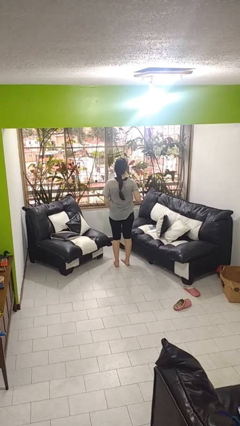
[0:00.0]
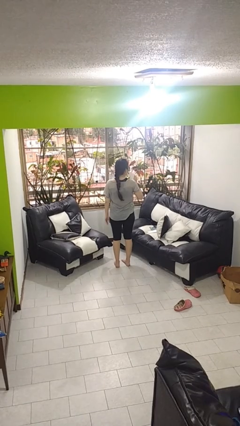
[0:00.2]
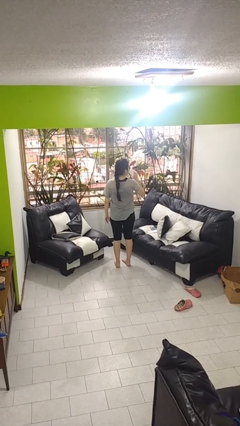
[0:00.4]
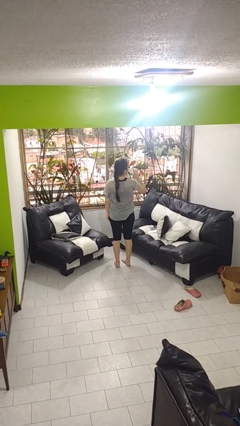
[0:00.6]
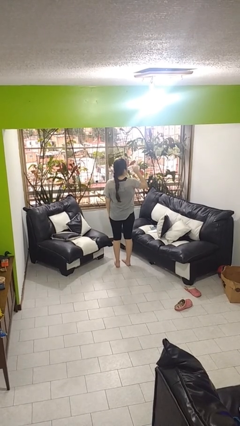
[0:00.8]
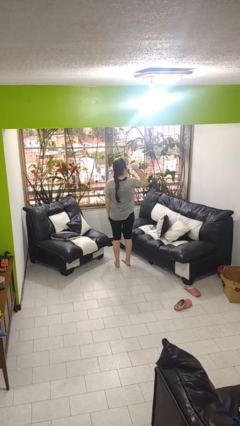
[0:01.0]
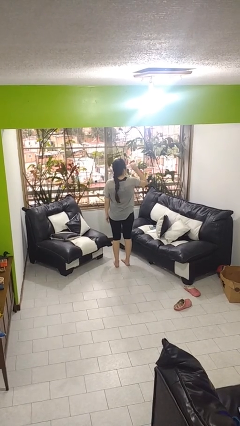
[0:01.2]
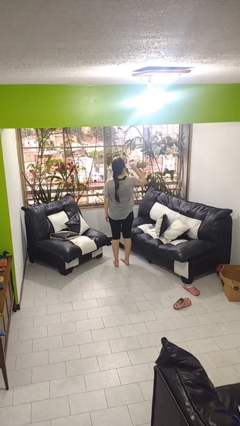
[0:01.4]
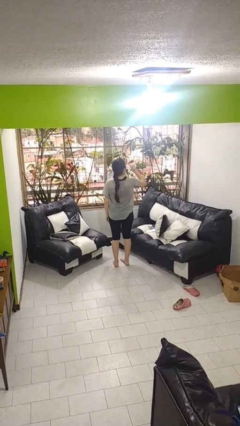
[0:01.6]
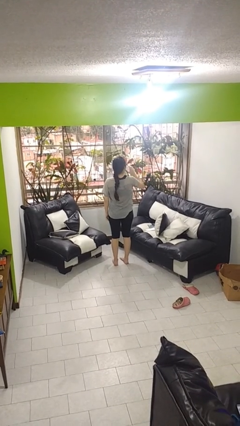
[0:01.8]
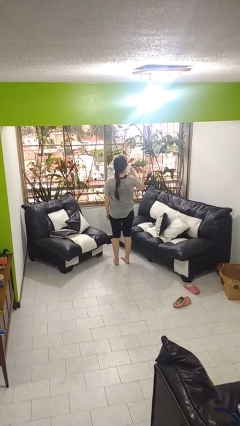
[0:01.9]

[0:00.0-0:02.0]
person drinks from bottle

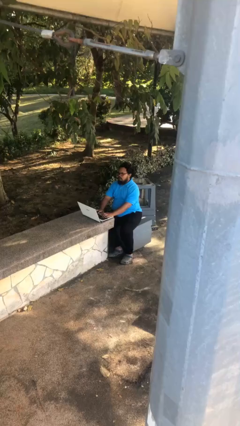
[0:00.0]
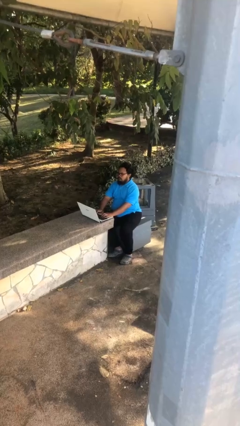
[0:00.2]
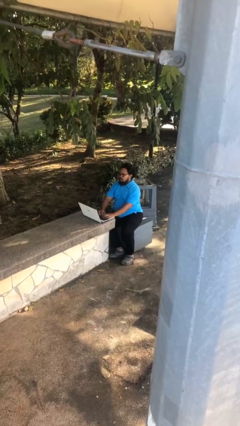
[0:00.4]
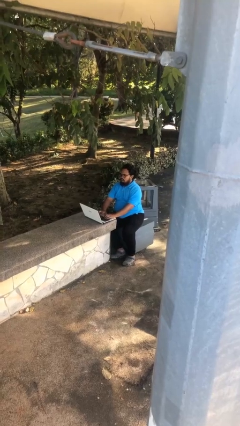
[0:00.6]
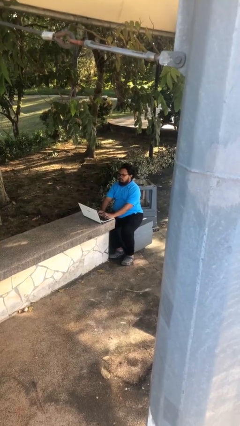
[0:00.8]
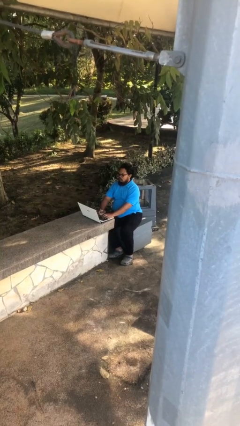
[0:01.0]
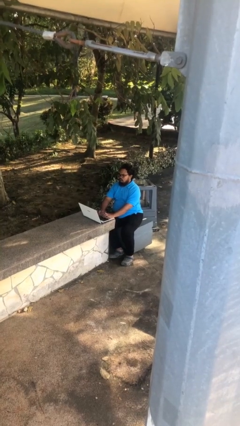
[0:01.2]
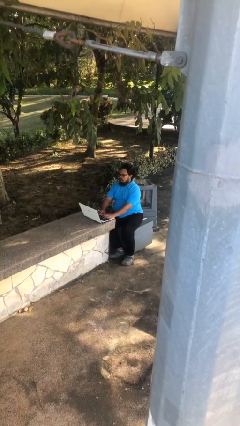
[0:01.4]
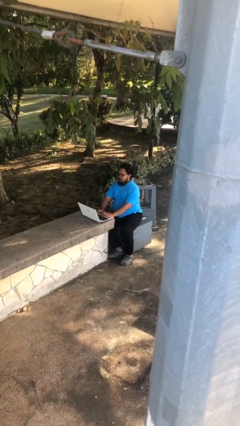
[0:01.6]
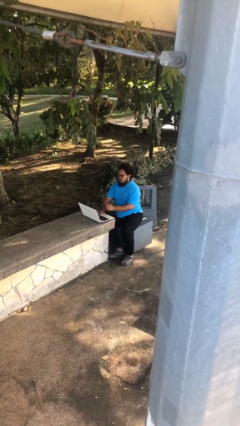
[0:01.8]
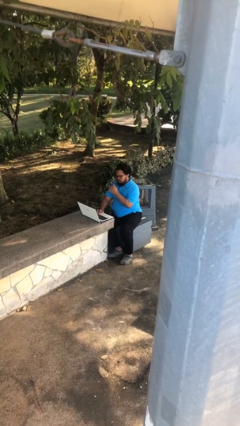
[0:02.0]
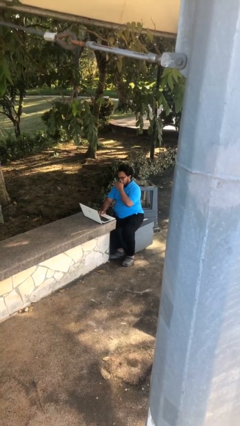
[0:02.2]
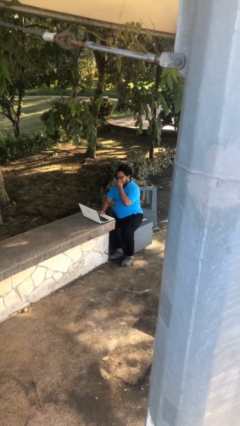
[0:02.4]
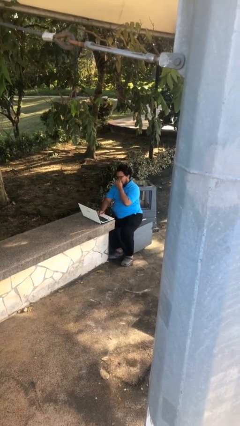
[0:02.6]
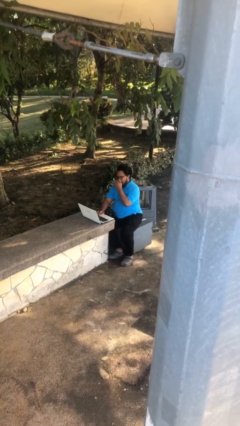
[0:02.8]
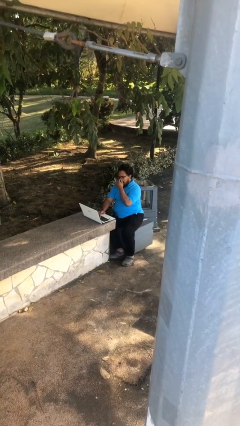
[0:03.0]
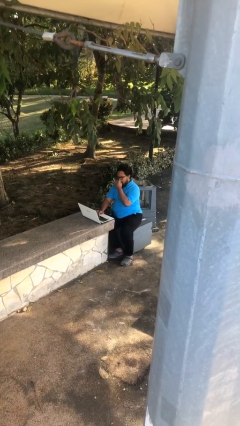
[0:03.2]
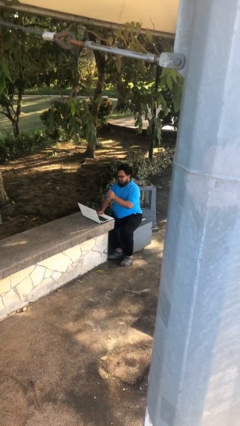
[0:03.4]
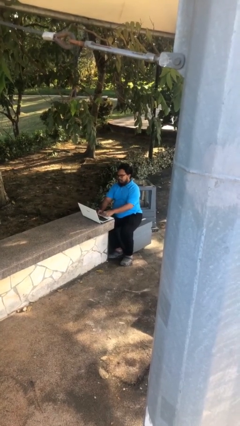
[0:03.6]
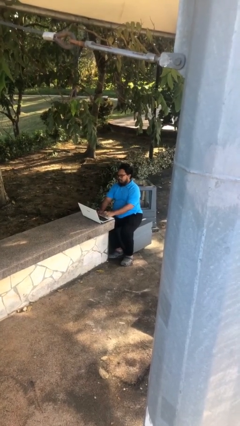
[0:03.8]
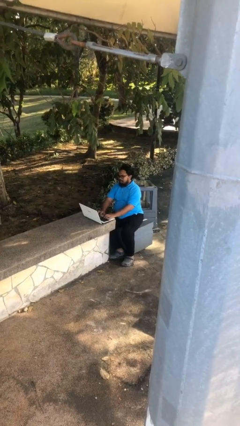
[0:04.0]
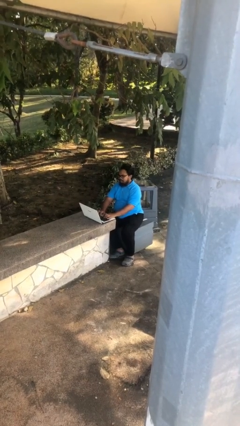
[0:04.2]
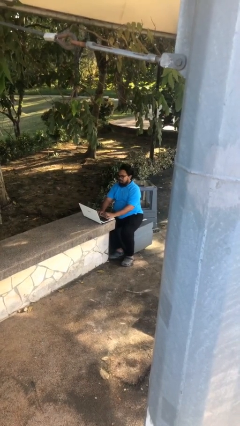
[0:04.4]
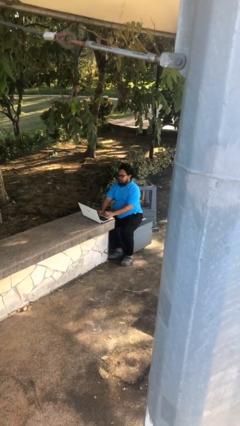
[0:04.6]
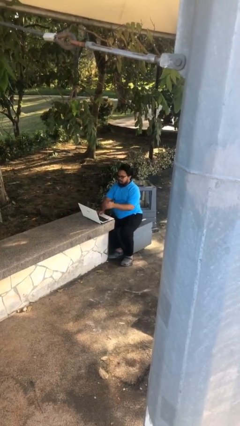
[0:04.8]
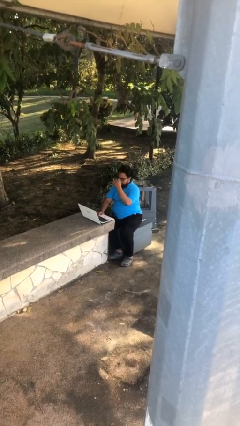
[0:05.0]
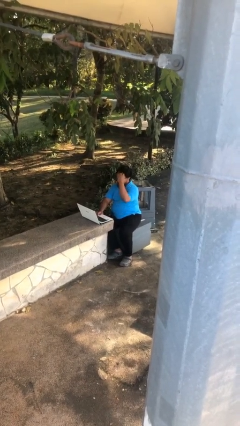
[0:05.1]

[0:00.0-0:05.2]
person interacts with laptop

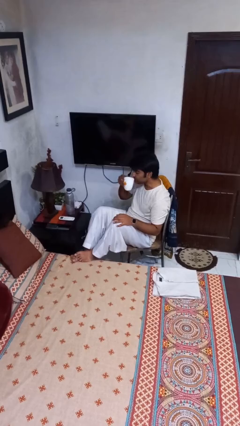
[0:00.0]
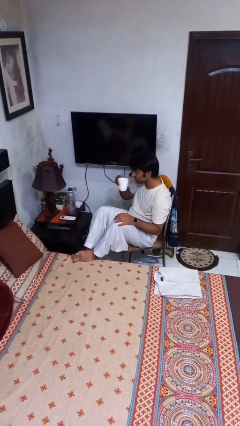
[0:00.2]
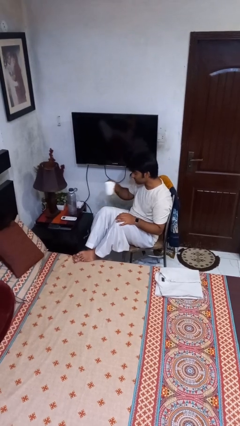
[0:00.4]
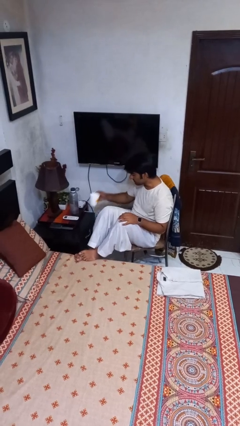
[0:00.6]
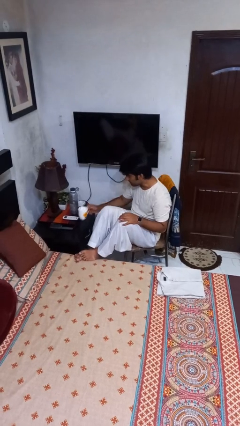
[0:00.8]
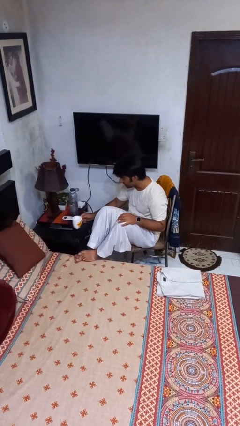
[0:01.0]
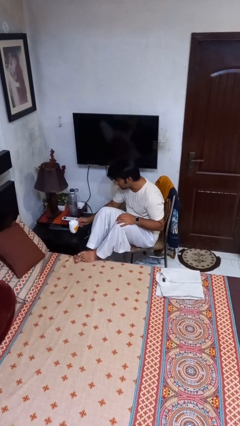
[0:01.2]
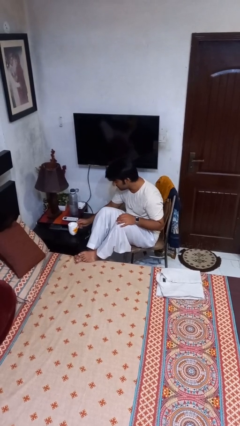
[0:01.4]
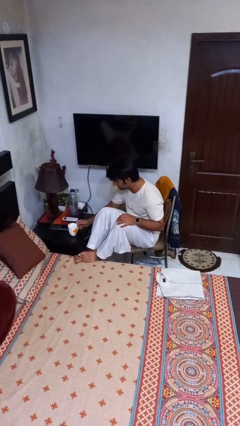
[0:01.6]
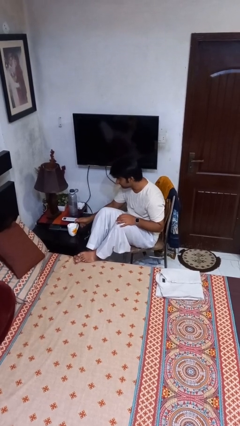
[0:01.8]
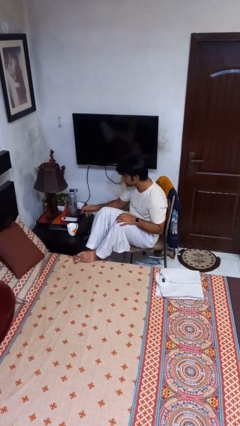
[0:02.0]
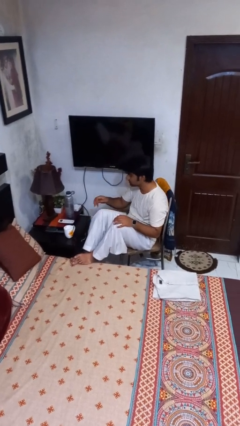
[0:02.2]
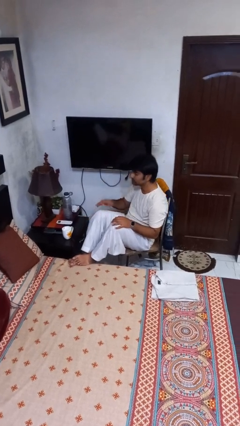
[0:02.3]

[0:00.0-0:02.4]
person puts down object on table

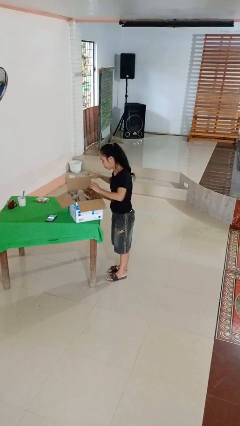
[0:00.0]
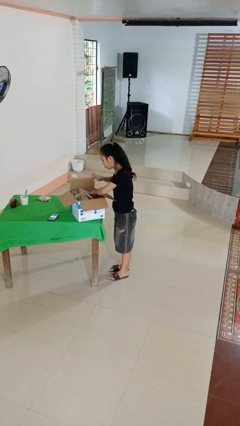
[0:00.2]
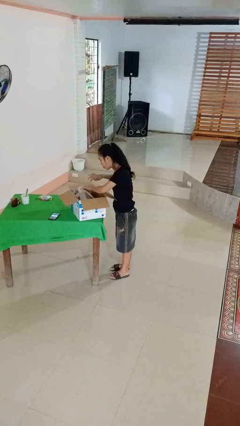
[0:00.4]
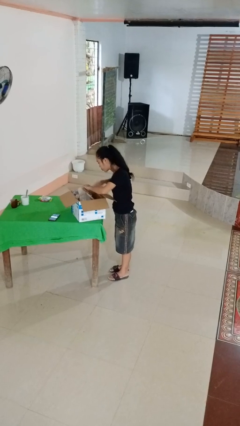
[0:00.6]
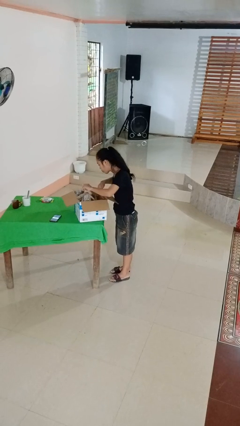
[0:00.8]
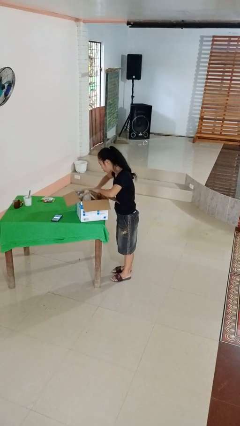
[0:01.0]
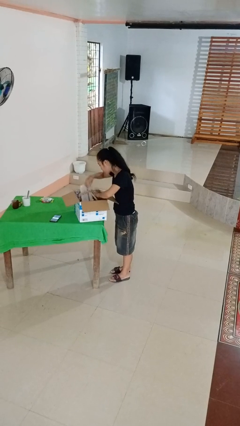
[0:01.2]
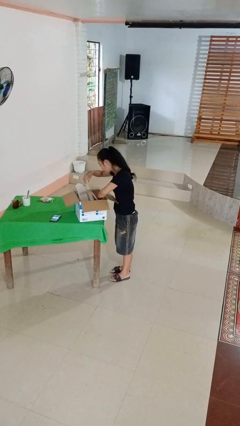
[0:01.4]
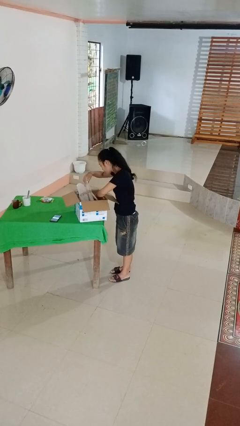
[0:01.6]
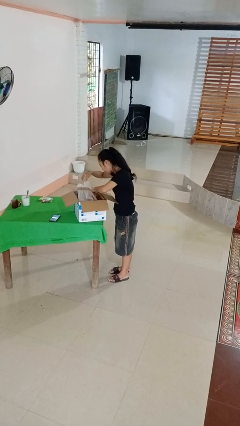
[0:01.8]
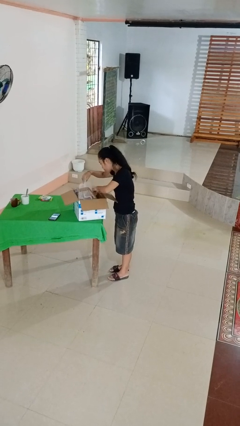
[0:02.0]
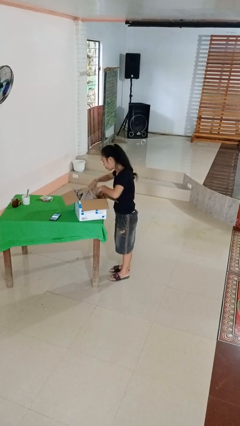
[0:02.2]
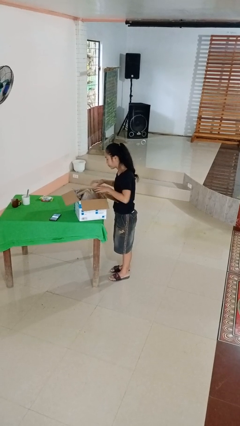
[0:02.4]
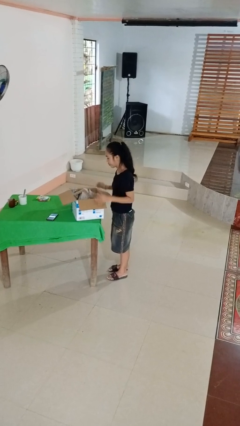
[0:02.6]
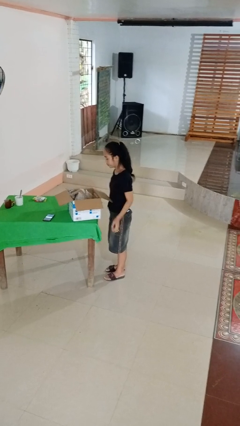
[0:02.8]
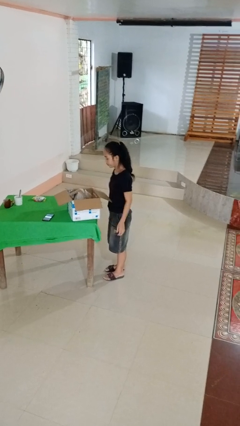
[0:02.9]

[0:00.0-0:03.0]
person searches in box

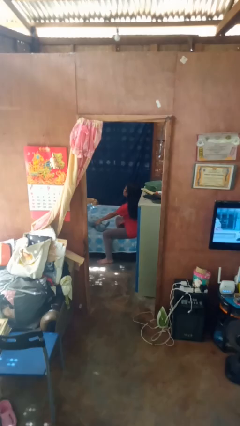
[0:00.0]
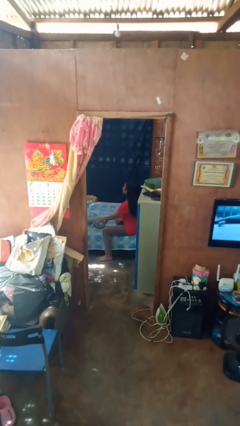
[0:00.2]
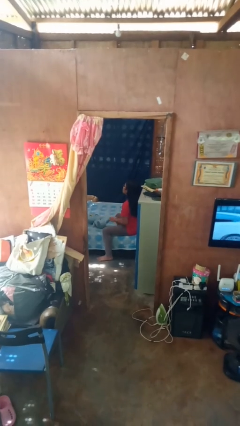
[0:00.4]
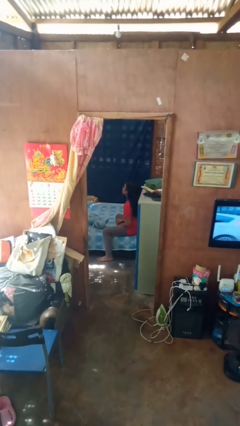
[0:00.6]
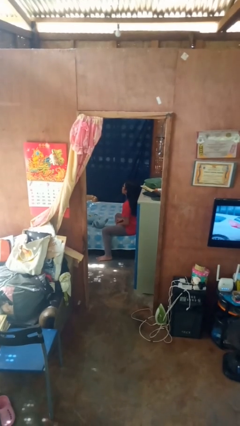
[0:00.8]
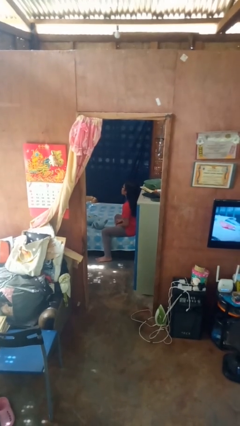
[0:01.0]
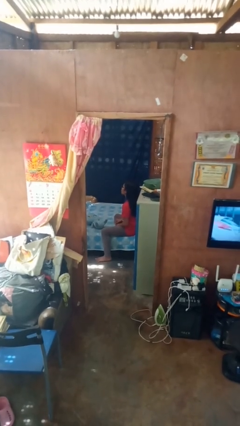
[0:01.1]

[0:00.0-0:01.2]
person puts down object on bed

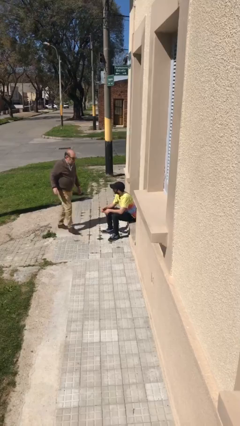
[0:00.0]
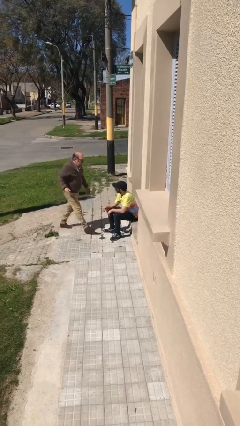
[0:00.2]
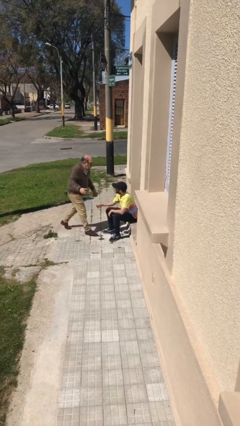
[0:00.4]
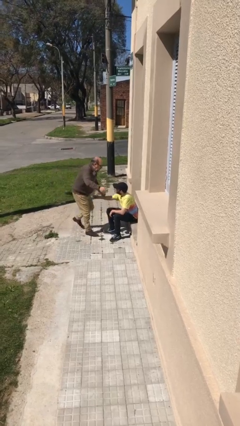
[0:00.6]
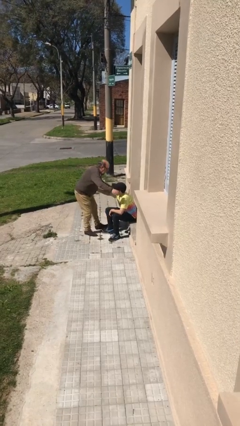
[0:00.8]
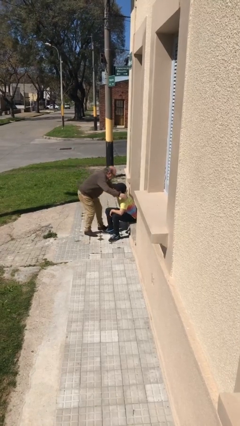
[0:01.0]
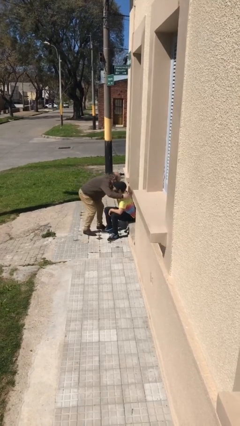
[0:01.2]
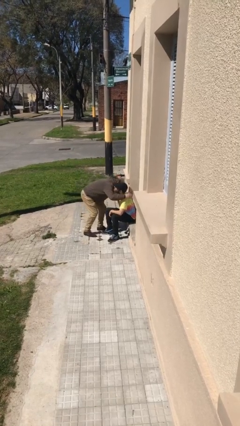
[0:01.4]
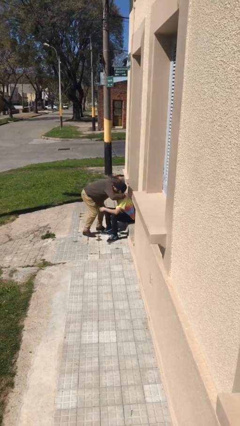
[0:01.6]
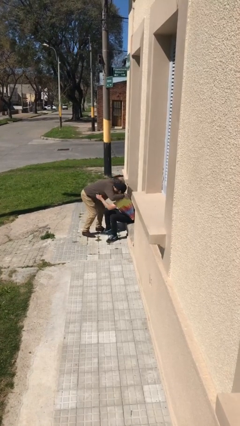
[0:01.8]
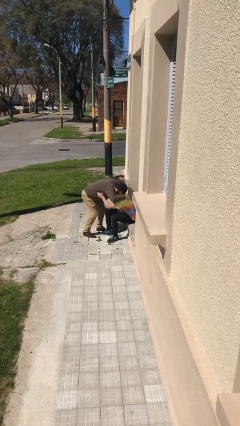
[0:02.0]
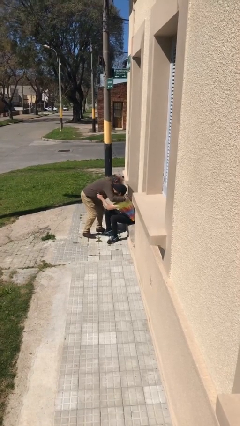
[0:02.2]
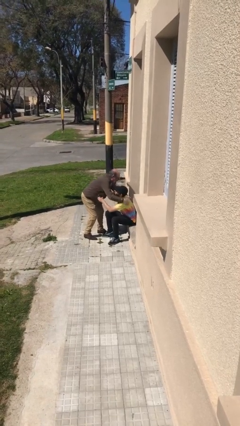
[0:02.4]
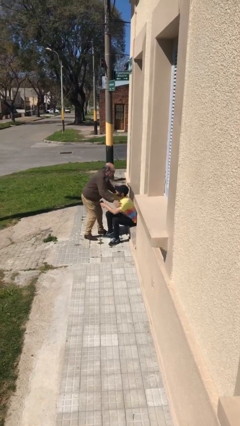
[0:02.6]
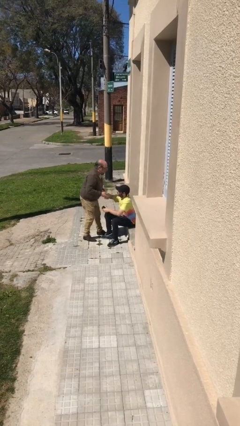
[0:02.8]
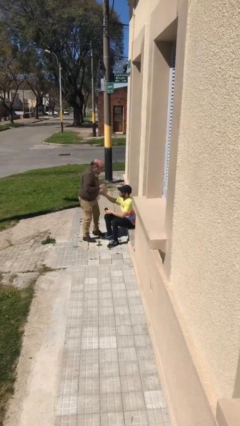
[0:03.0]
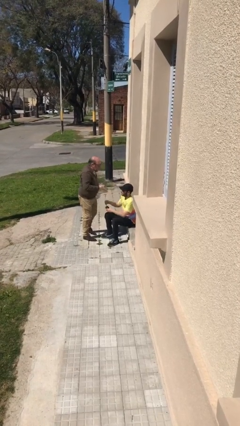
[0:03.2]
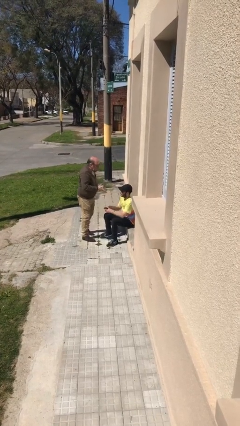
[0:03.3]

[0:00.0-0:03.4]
person embraces person
